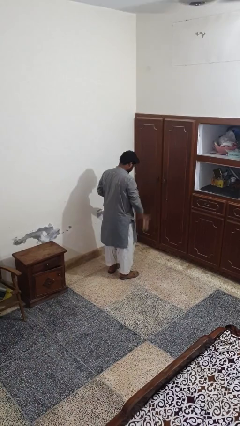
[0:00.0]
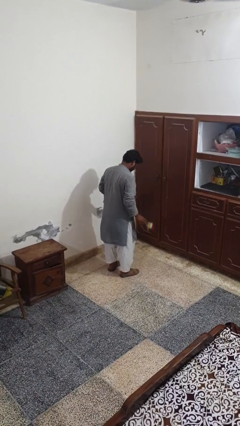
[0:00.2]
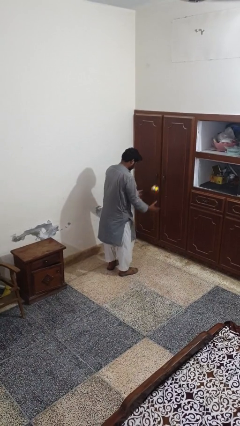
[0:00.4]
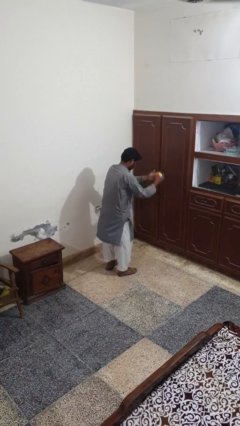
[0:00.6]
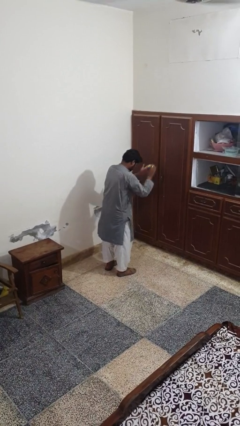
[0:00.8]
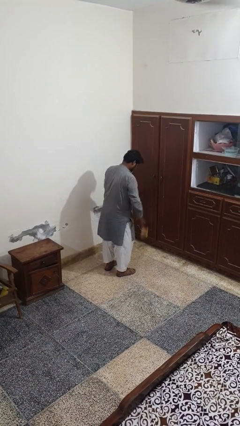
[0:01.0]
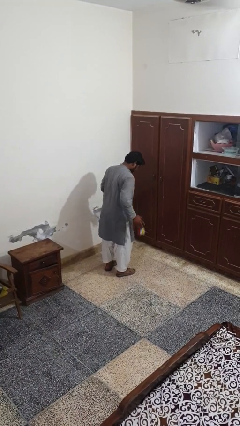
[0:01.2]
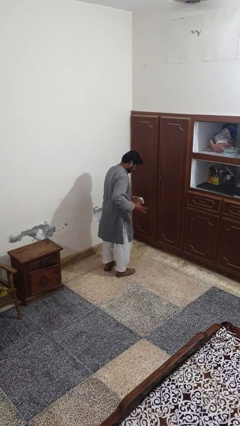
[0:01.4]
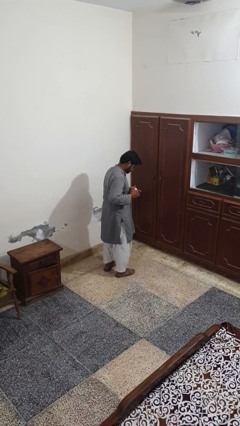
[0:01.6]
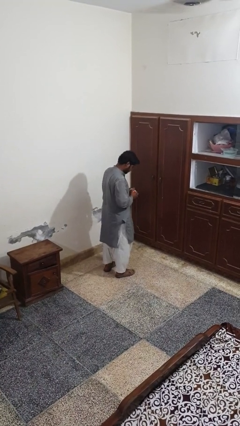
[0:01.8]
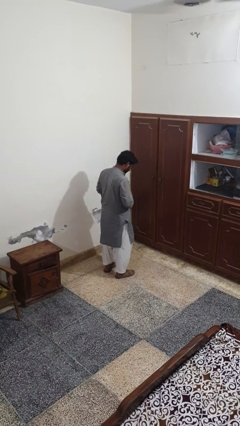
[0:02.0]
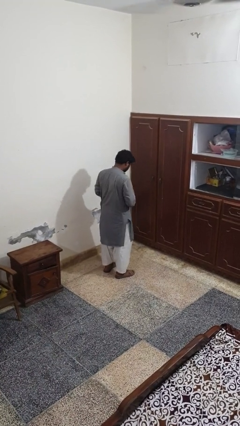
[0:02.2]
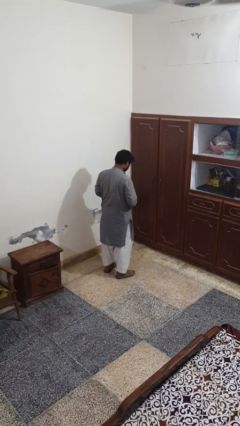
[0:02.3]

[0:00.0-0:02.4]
person bounces ball on floor

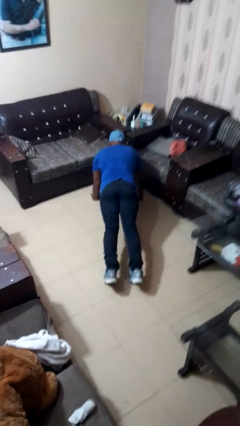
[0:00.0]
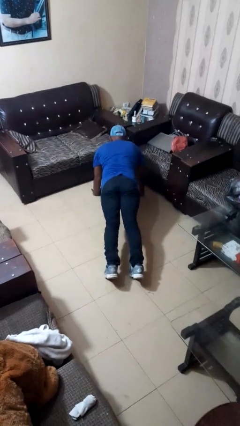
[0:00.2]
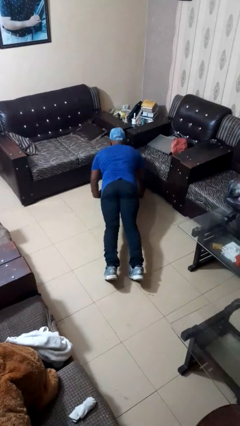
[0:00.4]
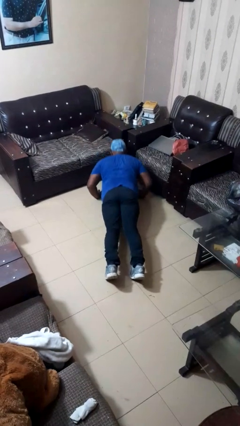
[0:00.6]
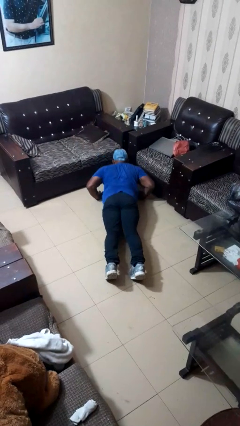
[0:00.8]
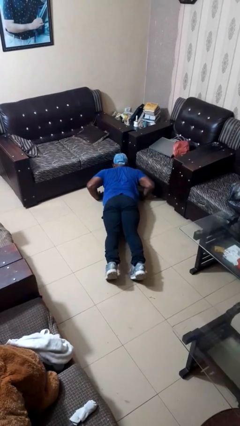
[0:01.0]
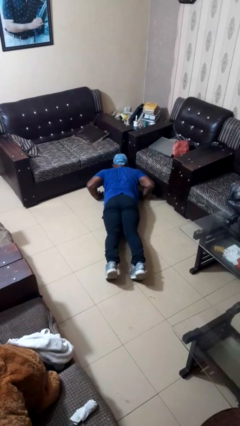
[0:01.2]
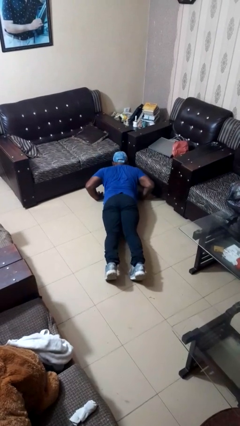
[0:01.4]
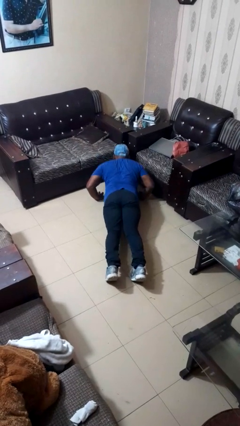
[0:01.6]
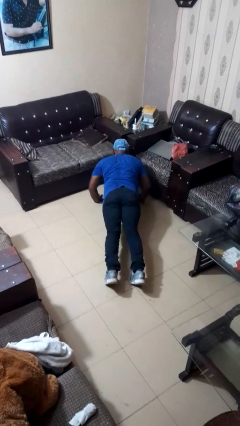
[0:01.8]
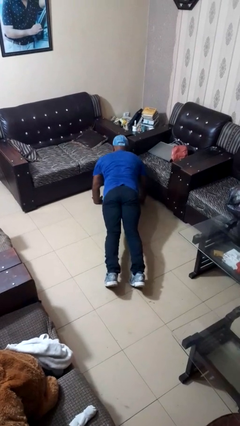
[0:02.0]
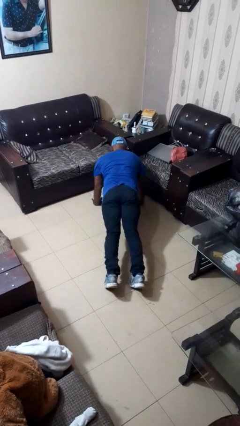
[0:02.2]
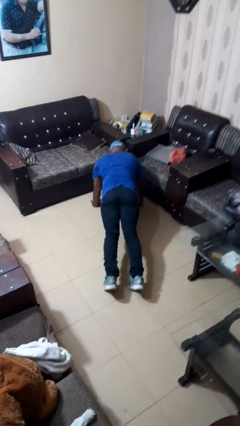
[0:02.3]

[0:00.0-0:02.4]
person exercises with pushup

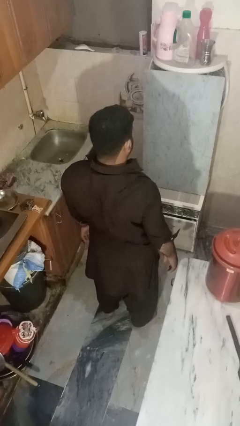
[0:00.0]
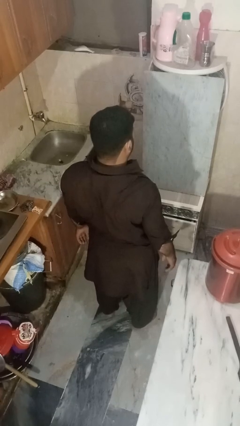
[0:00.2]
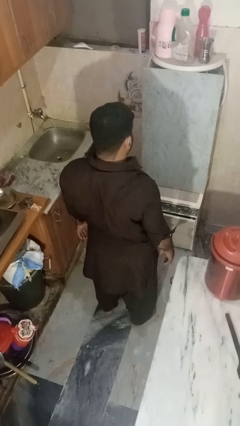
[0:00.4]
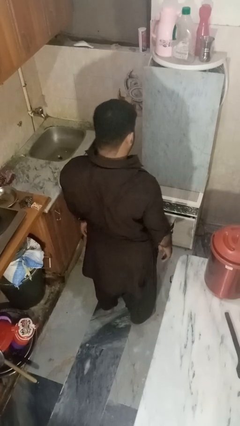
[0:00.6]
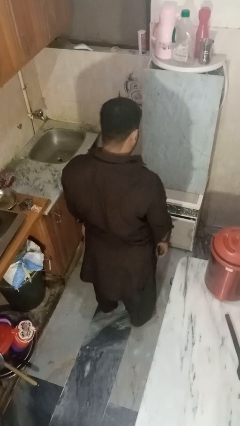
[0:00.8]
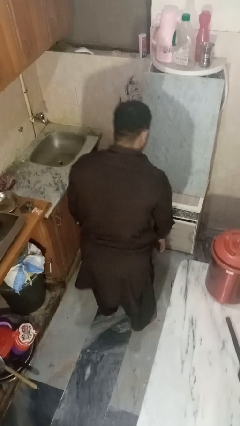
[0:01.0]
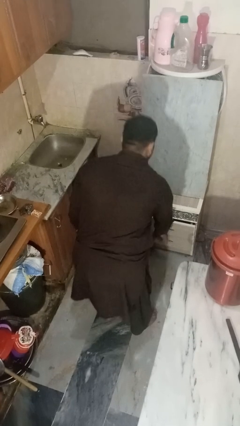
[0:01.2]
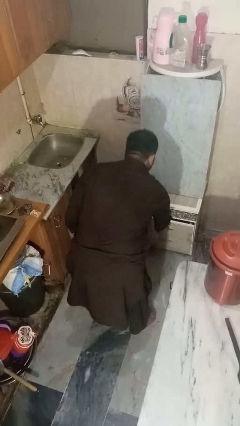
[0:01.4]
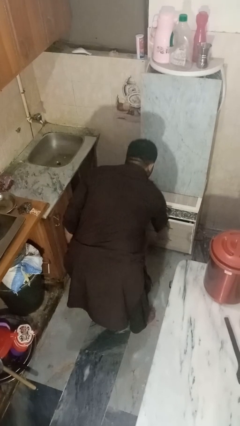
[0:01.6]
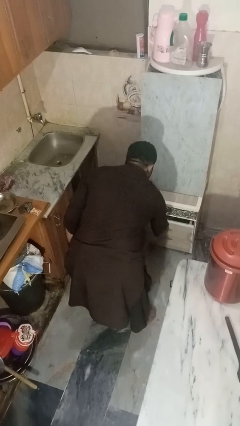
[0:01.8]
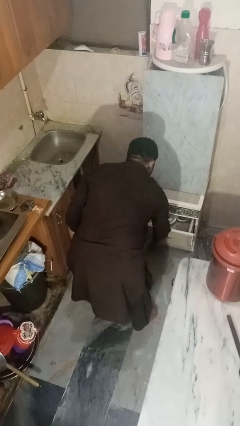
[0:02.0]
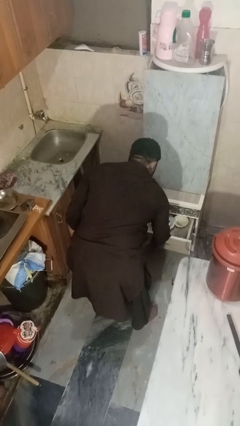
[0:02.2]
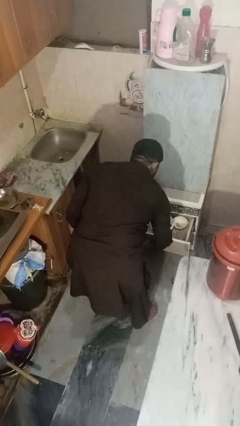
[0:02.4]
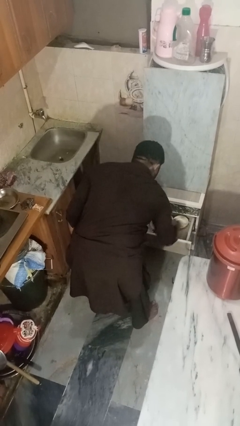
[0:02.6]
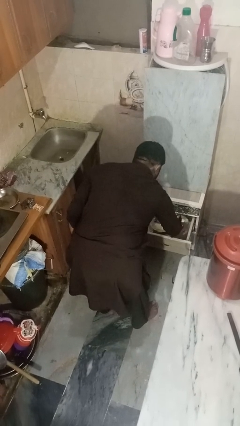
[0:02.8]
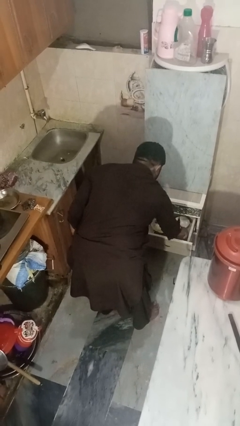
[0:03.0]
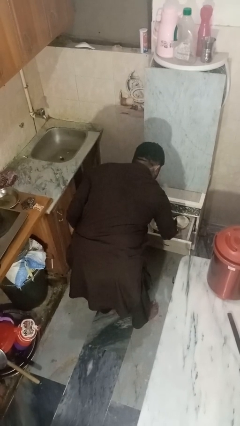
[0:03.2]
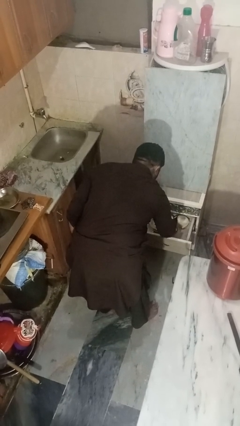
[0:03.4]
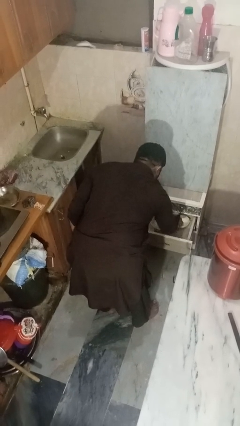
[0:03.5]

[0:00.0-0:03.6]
person searches in kitchen drawer

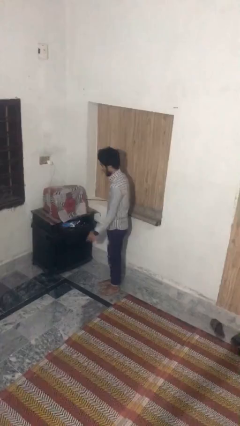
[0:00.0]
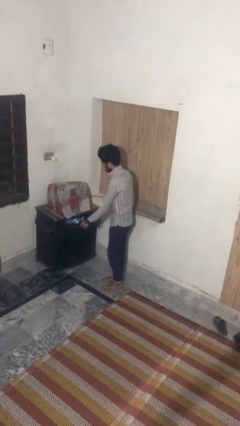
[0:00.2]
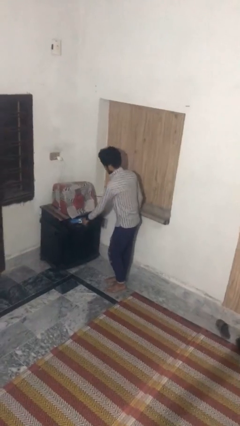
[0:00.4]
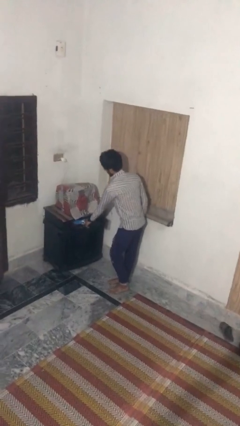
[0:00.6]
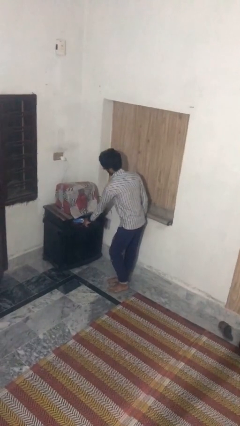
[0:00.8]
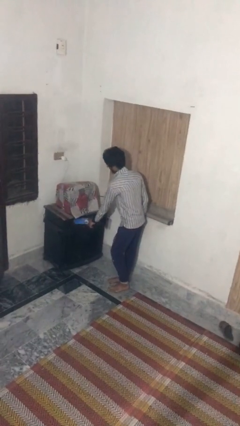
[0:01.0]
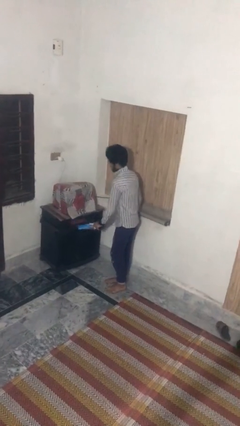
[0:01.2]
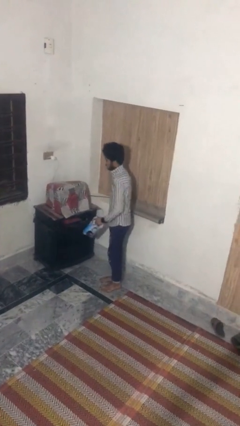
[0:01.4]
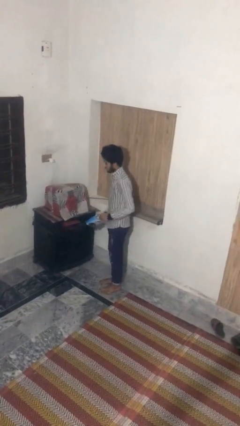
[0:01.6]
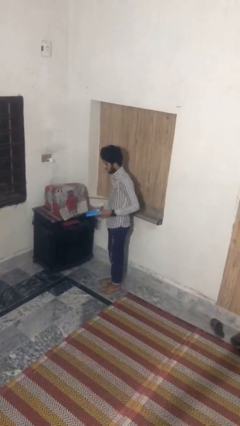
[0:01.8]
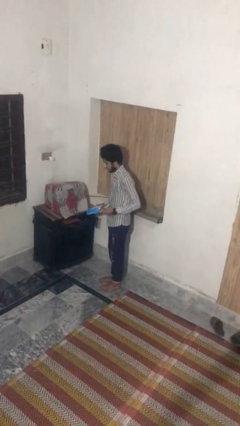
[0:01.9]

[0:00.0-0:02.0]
person picks up object from cabinet

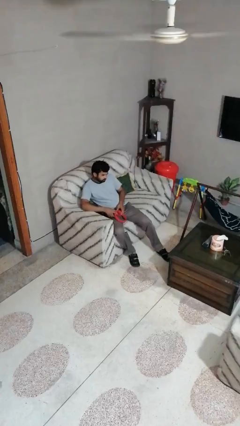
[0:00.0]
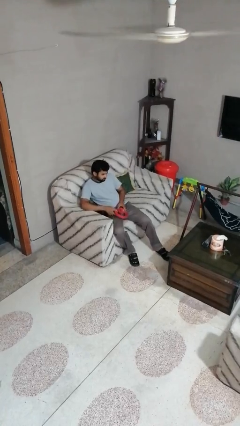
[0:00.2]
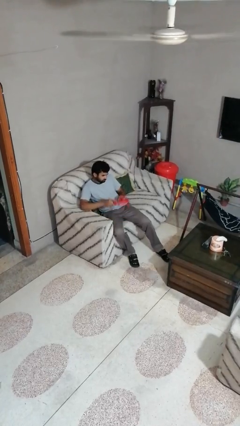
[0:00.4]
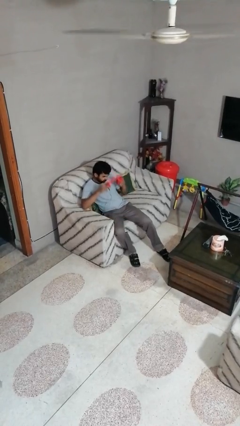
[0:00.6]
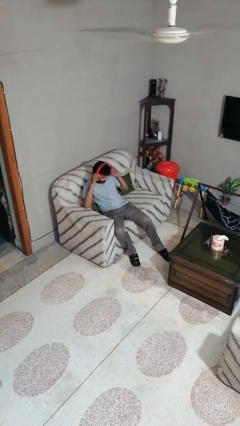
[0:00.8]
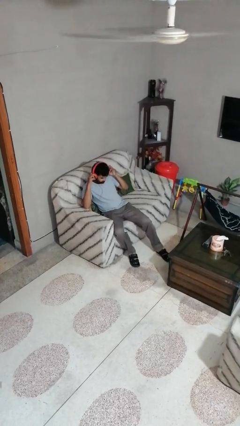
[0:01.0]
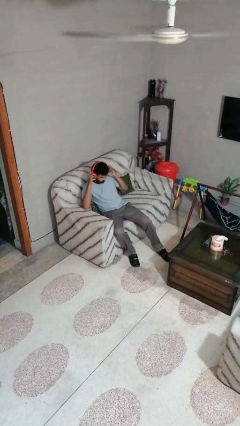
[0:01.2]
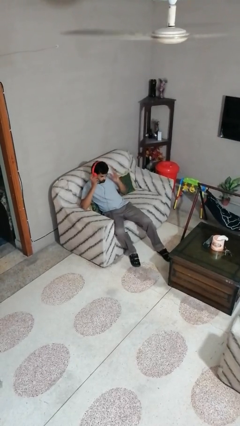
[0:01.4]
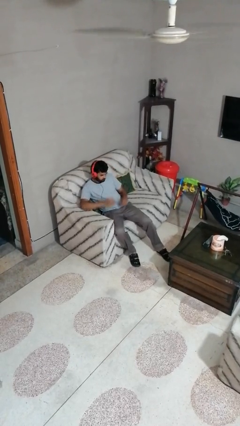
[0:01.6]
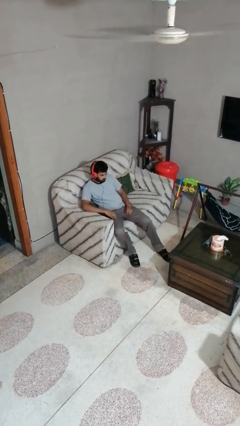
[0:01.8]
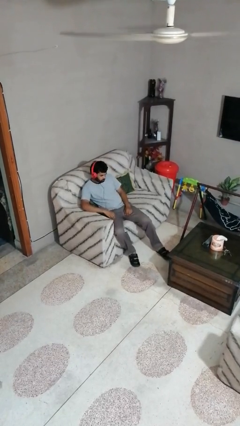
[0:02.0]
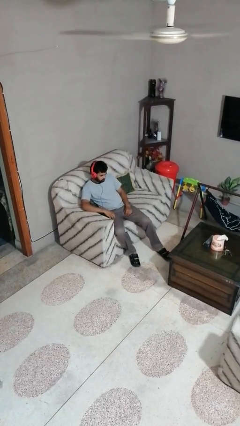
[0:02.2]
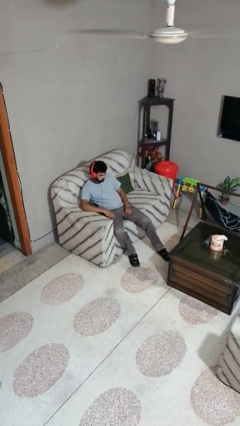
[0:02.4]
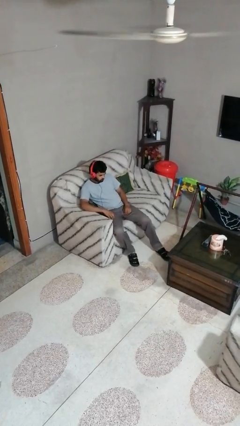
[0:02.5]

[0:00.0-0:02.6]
person puts on headphones

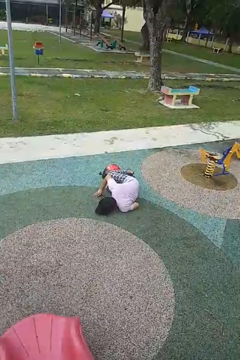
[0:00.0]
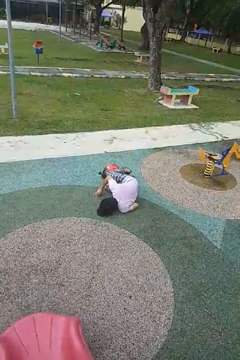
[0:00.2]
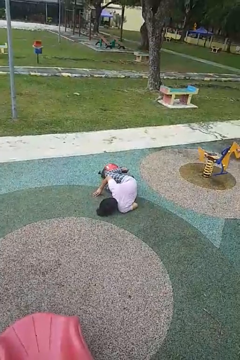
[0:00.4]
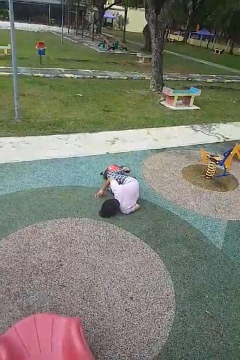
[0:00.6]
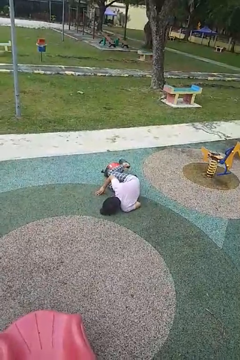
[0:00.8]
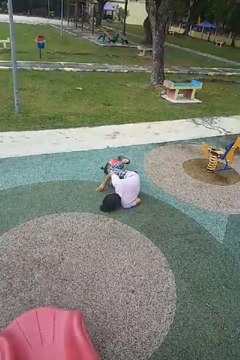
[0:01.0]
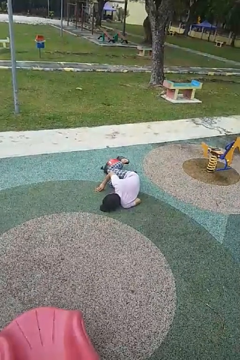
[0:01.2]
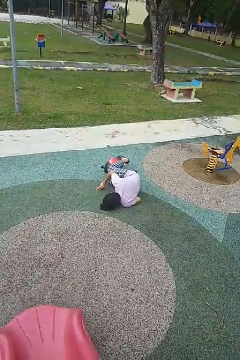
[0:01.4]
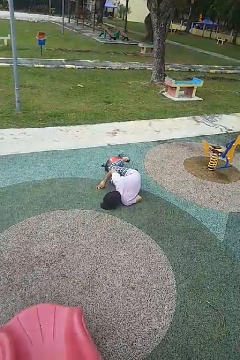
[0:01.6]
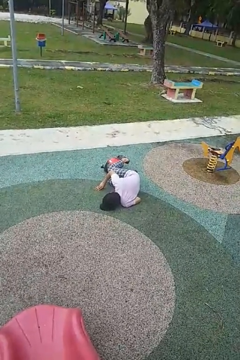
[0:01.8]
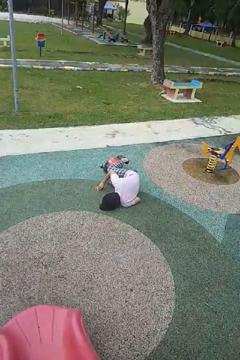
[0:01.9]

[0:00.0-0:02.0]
person lies down on floor

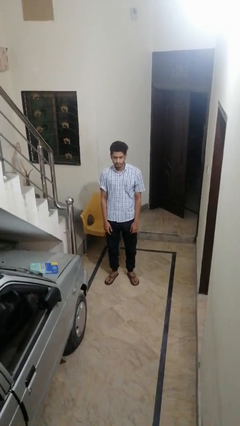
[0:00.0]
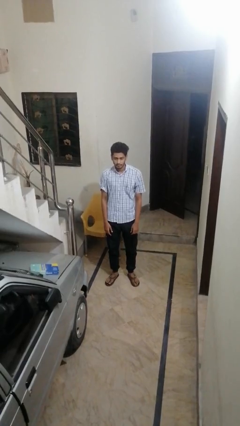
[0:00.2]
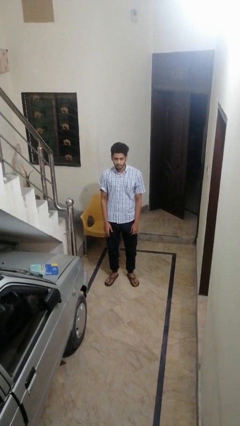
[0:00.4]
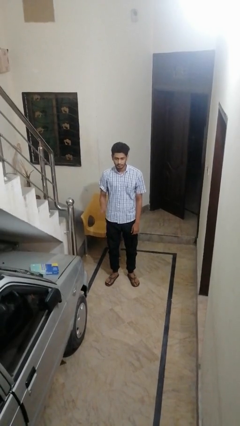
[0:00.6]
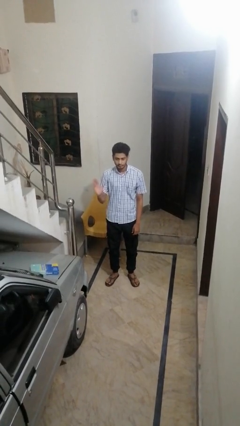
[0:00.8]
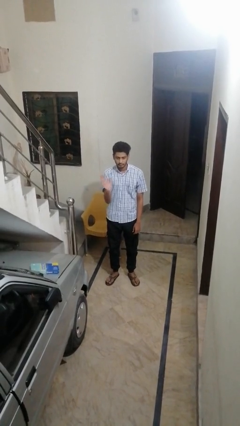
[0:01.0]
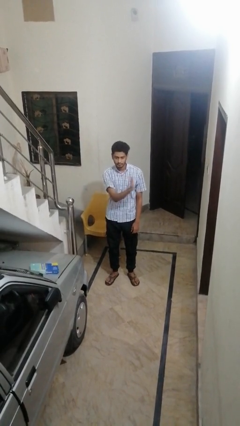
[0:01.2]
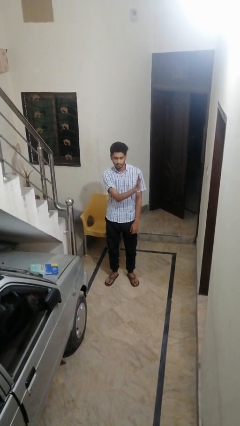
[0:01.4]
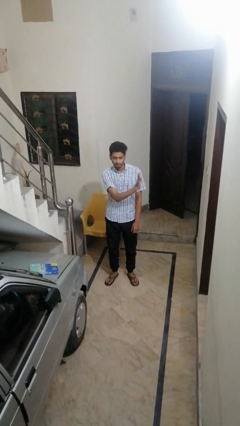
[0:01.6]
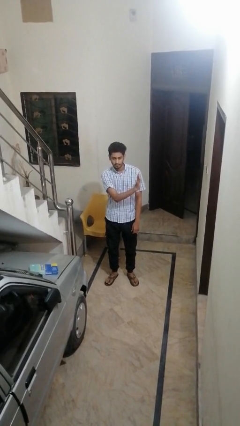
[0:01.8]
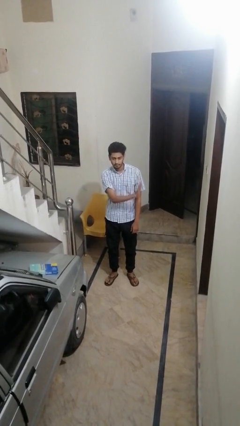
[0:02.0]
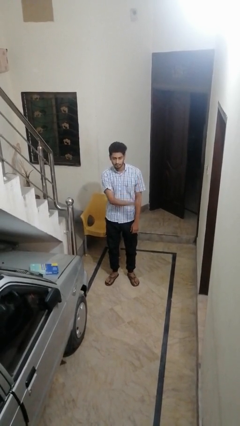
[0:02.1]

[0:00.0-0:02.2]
person gestures swipe left

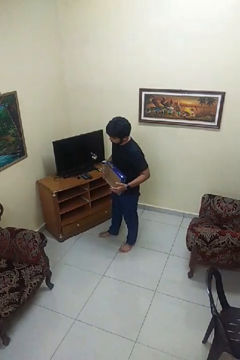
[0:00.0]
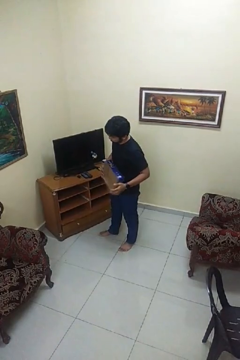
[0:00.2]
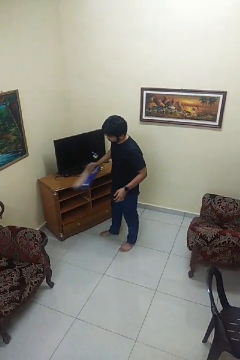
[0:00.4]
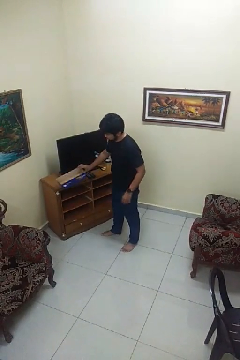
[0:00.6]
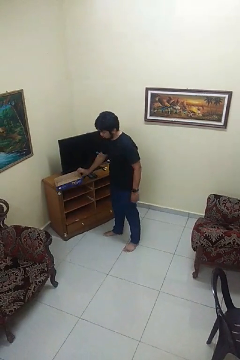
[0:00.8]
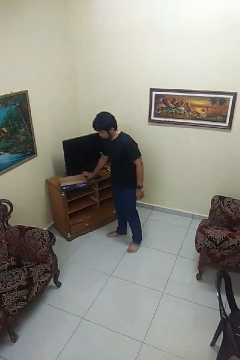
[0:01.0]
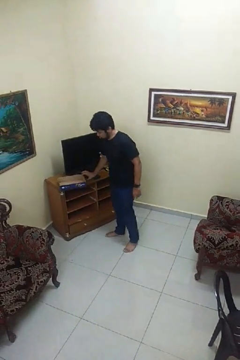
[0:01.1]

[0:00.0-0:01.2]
person puts down object on countertop
